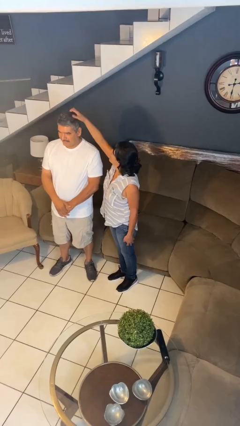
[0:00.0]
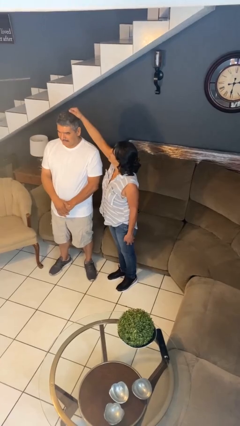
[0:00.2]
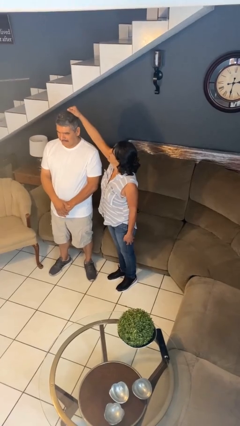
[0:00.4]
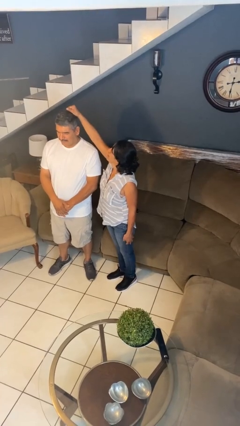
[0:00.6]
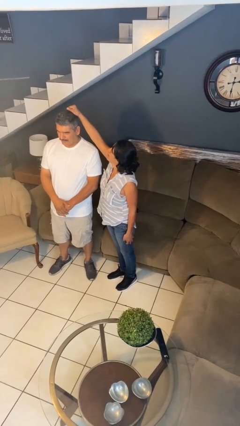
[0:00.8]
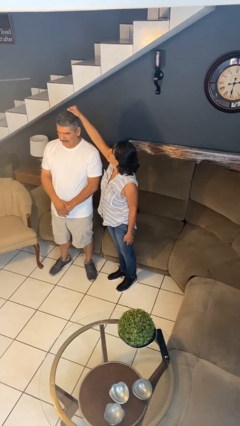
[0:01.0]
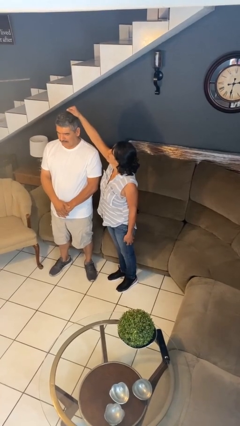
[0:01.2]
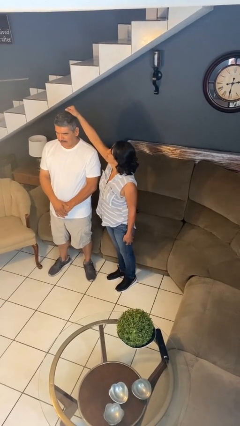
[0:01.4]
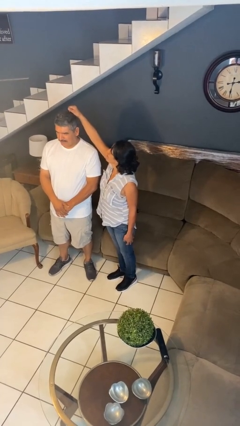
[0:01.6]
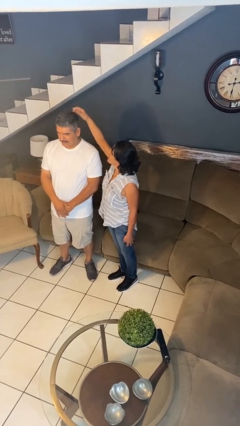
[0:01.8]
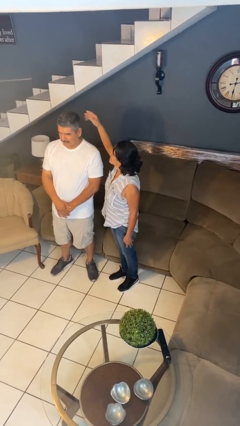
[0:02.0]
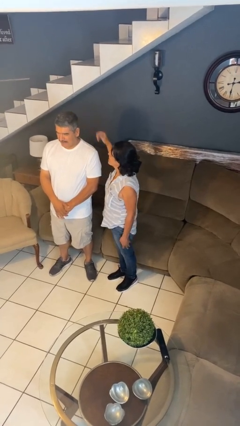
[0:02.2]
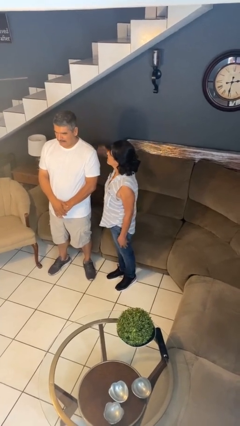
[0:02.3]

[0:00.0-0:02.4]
person grabs person by hair

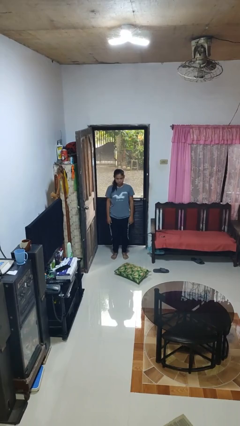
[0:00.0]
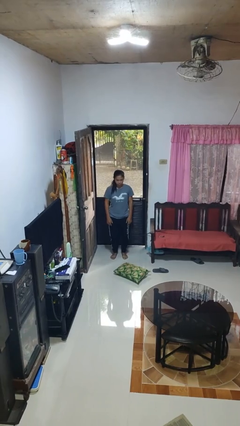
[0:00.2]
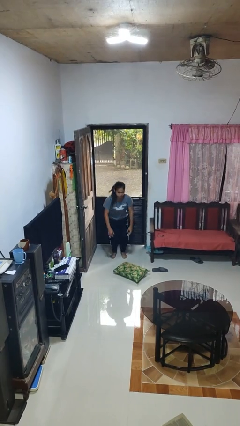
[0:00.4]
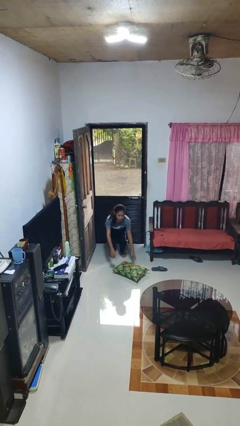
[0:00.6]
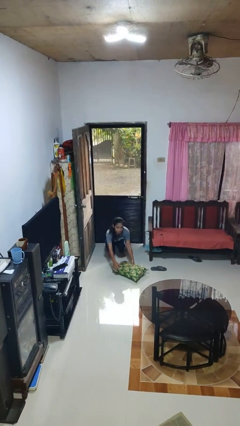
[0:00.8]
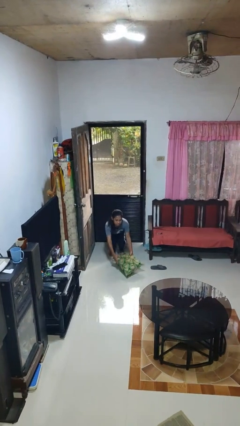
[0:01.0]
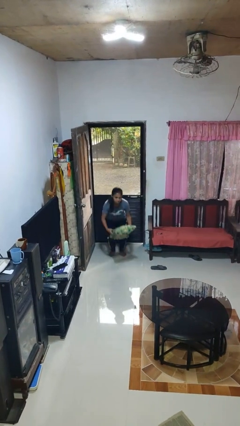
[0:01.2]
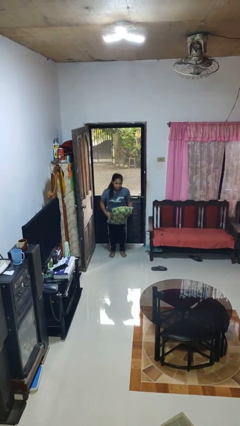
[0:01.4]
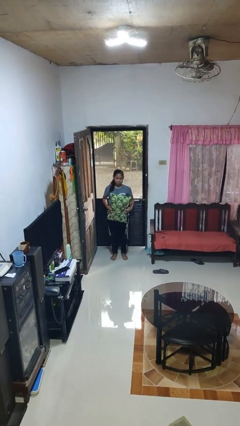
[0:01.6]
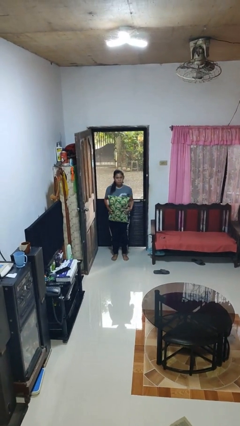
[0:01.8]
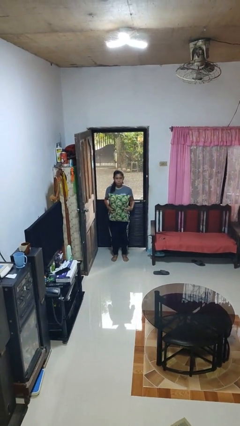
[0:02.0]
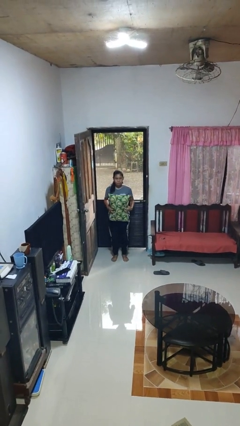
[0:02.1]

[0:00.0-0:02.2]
person picks up object from floor

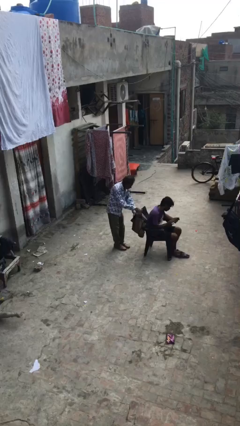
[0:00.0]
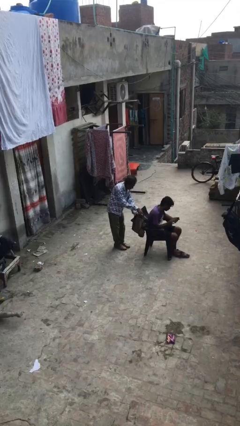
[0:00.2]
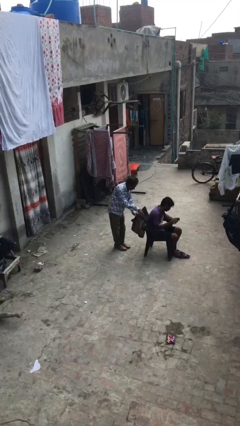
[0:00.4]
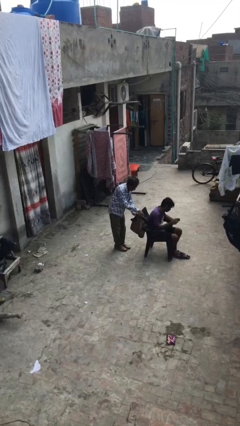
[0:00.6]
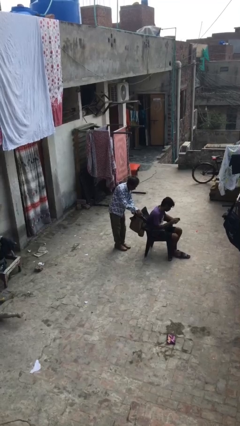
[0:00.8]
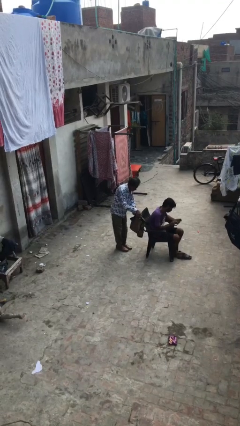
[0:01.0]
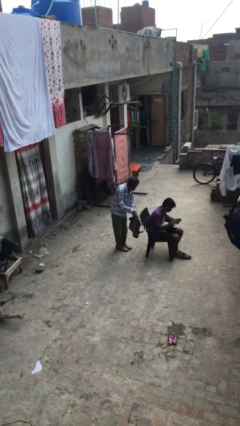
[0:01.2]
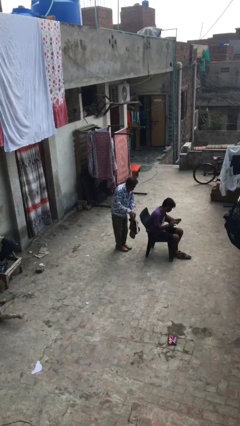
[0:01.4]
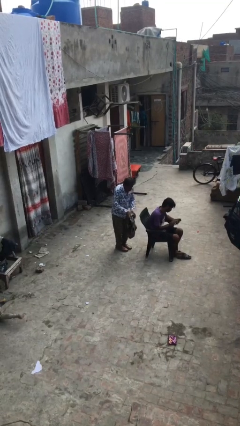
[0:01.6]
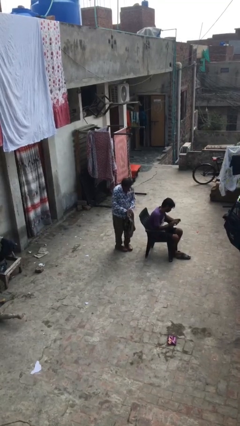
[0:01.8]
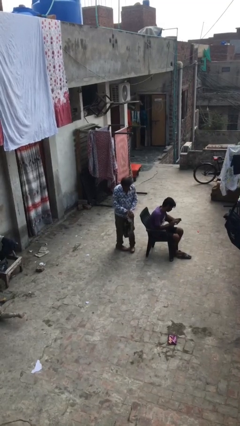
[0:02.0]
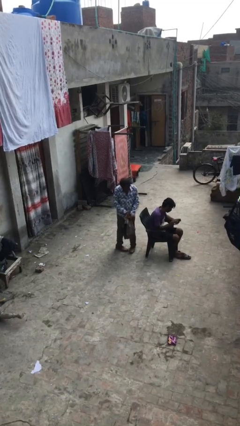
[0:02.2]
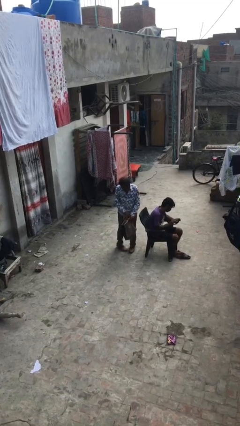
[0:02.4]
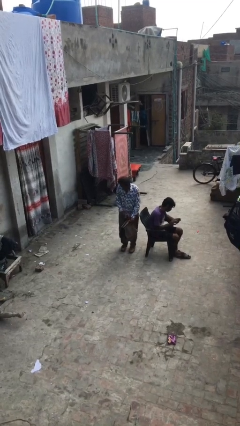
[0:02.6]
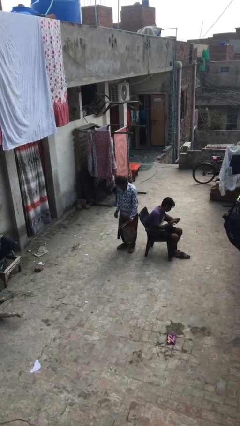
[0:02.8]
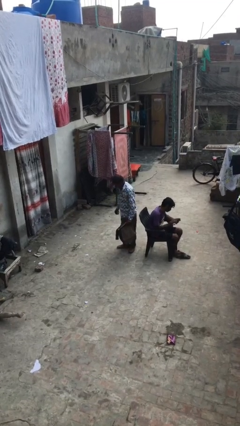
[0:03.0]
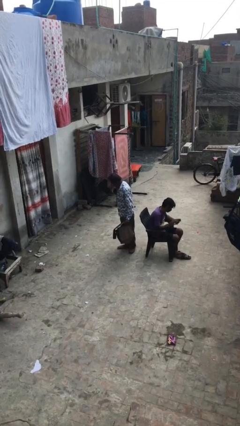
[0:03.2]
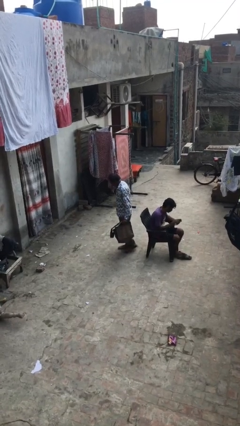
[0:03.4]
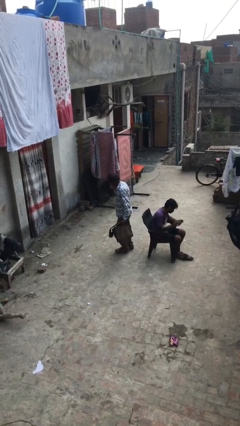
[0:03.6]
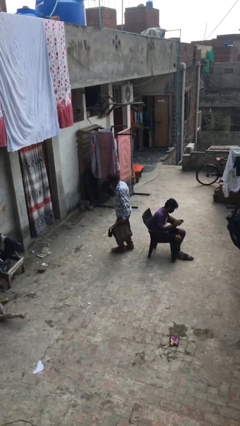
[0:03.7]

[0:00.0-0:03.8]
person steals object from person

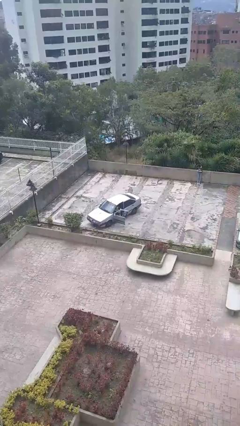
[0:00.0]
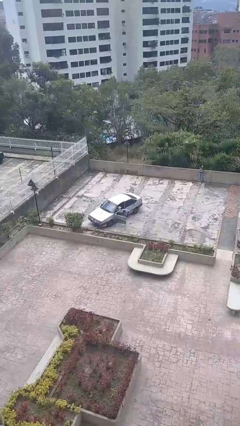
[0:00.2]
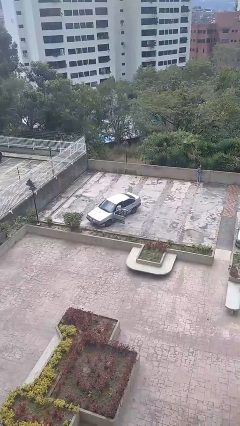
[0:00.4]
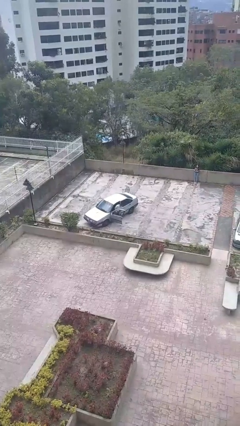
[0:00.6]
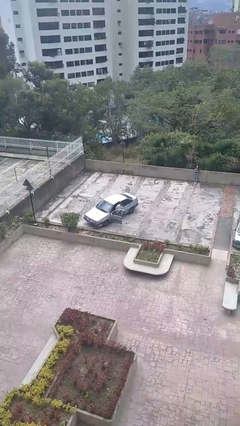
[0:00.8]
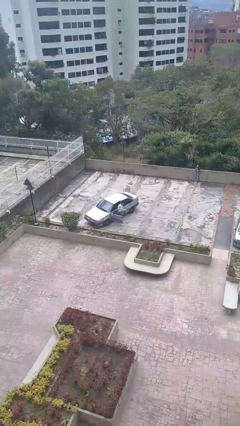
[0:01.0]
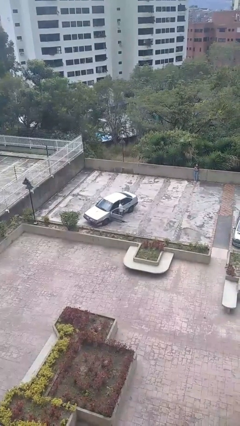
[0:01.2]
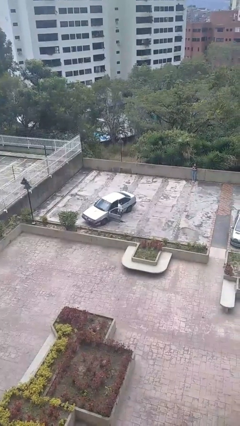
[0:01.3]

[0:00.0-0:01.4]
person exits car

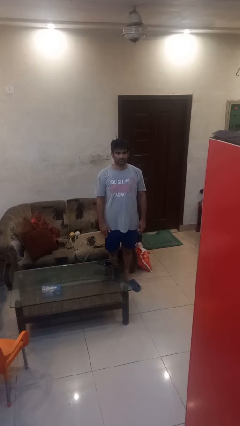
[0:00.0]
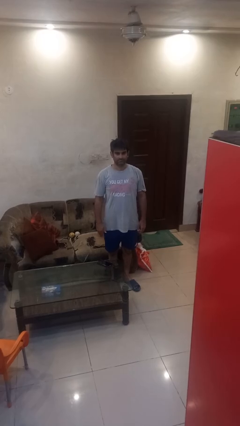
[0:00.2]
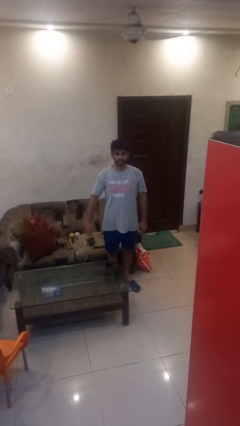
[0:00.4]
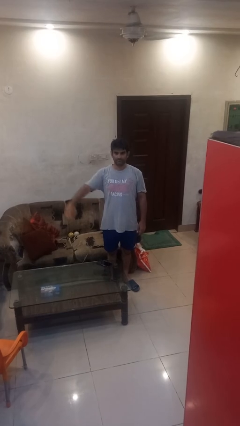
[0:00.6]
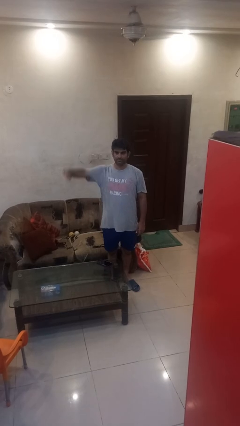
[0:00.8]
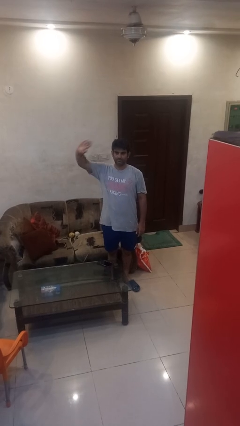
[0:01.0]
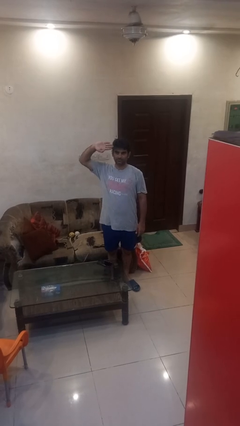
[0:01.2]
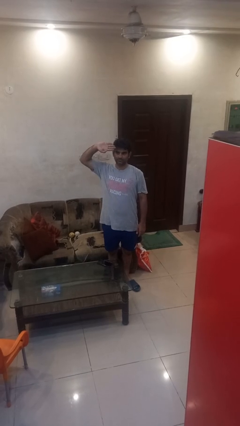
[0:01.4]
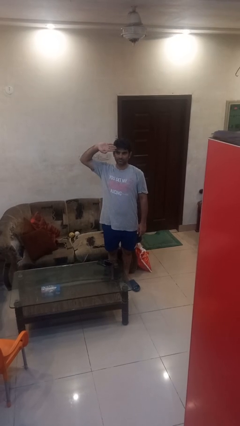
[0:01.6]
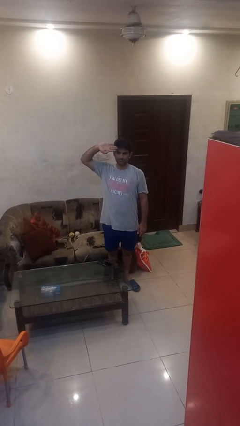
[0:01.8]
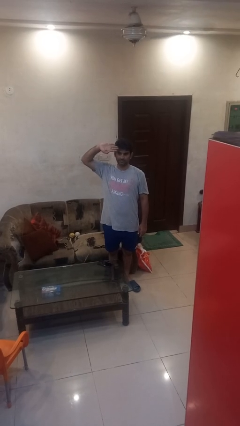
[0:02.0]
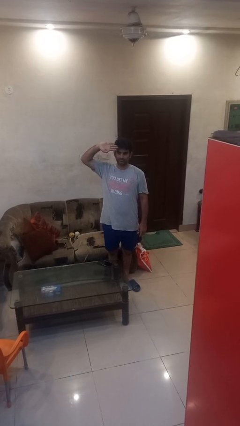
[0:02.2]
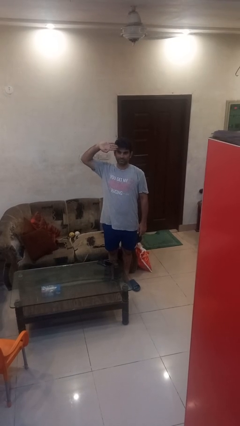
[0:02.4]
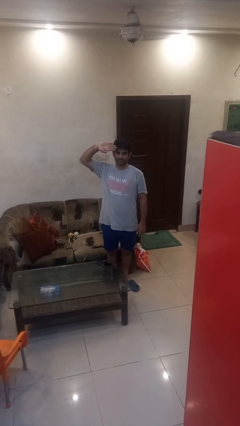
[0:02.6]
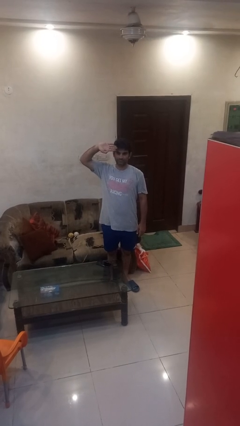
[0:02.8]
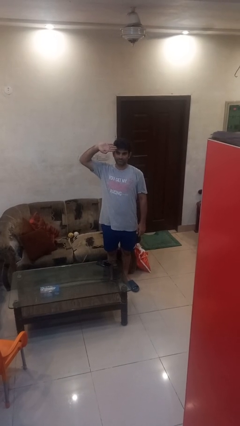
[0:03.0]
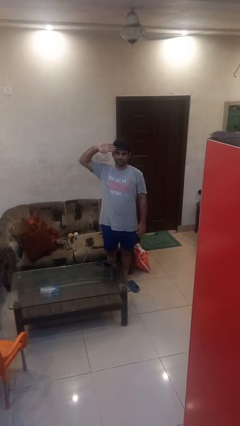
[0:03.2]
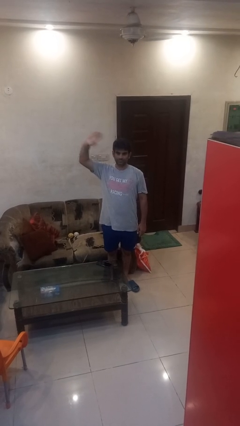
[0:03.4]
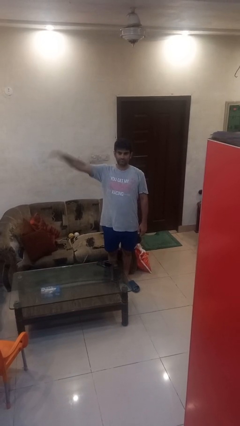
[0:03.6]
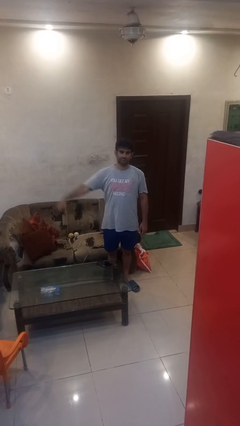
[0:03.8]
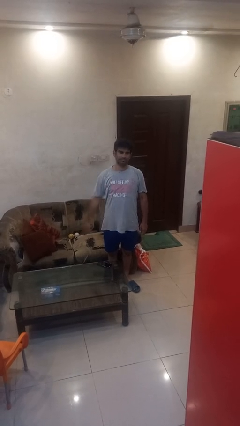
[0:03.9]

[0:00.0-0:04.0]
person salutes

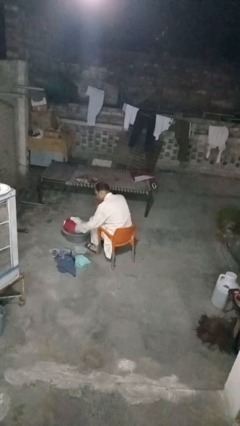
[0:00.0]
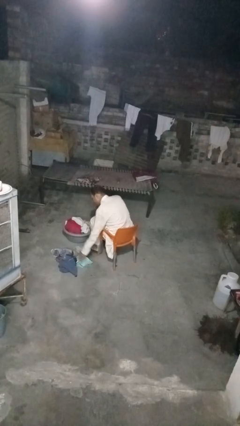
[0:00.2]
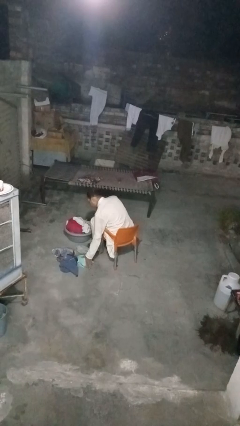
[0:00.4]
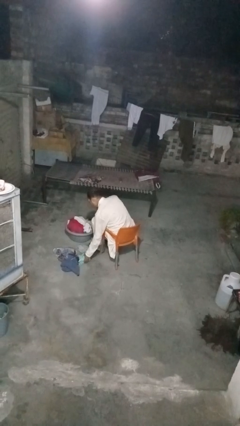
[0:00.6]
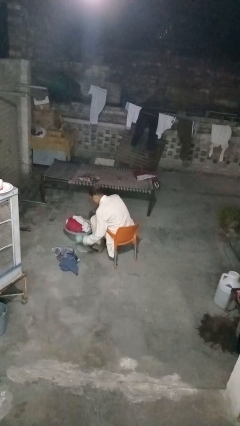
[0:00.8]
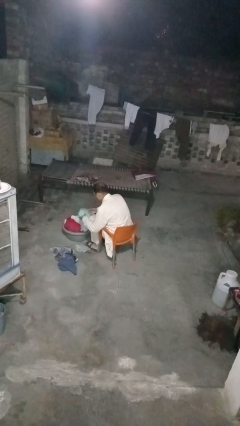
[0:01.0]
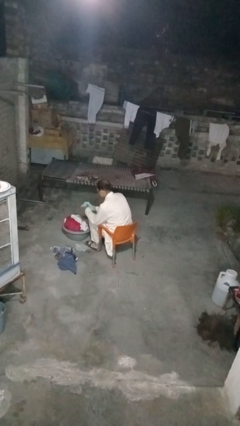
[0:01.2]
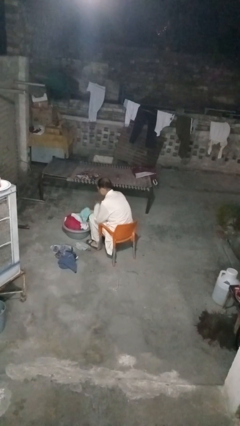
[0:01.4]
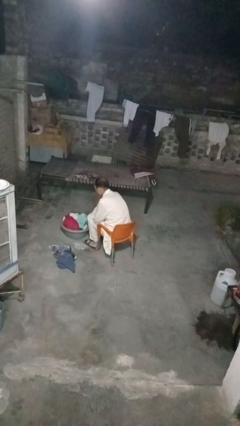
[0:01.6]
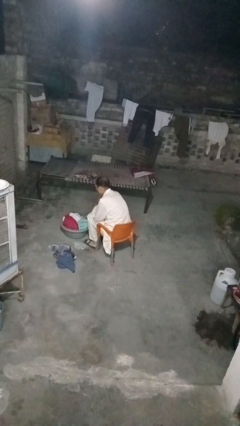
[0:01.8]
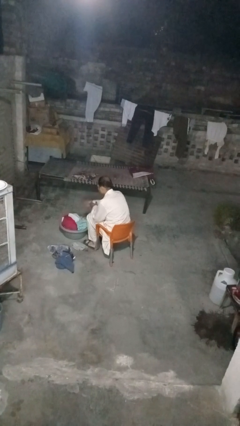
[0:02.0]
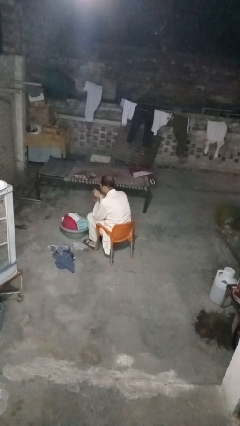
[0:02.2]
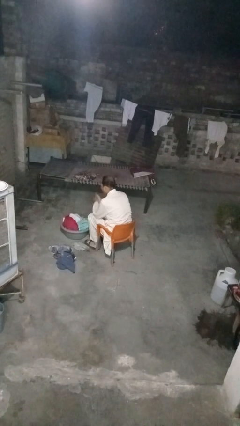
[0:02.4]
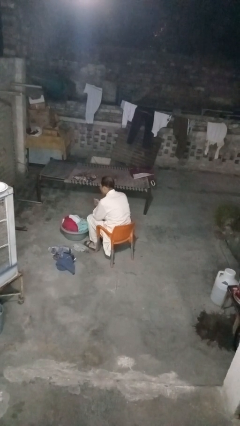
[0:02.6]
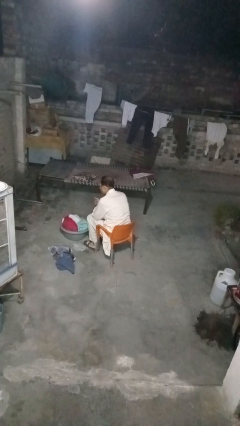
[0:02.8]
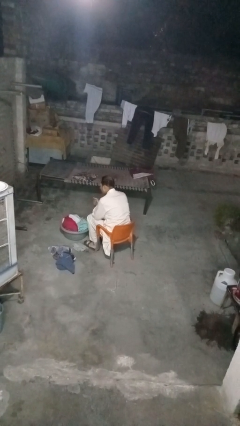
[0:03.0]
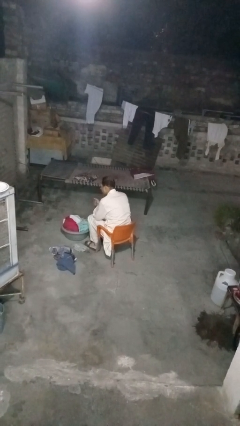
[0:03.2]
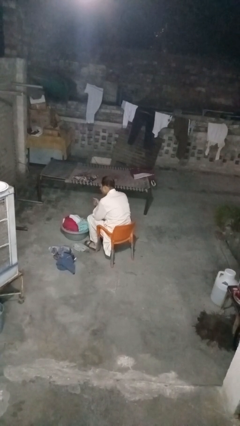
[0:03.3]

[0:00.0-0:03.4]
person puts object into basket
